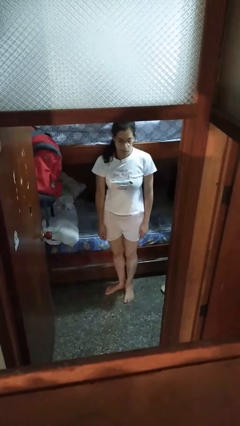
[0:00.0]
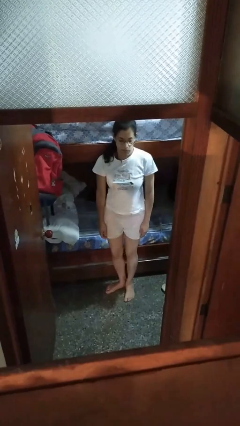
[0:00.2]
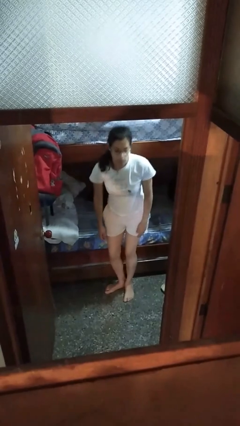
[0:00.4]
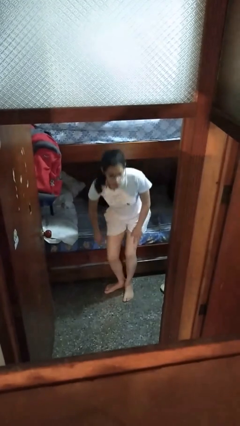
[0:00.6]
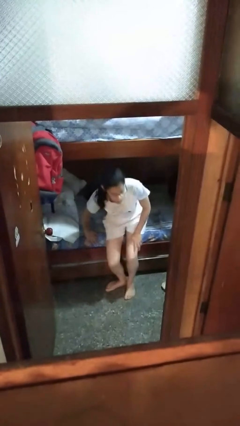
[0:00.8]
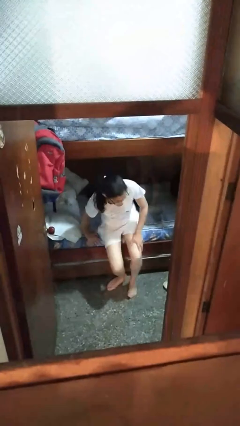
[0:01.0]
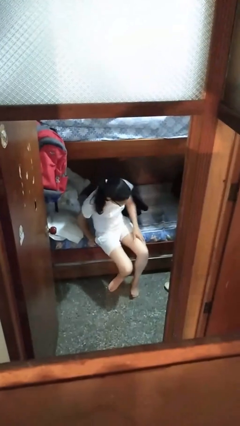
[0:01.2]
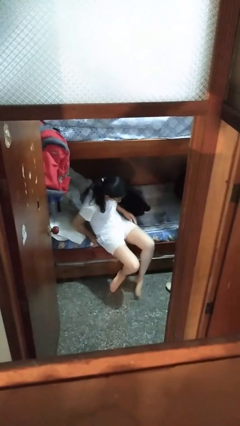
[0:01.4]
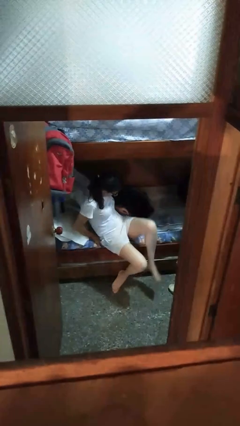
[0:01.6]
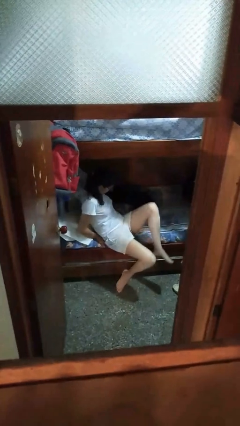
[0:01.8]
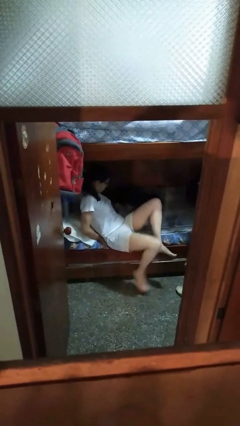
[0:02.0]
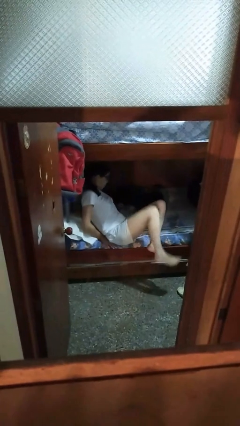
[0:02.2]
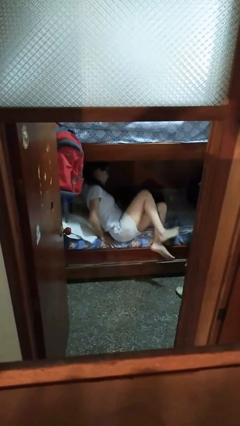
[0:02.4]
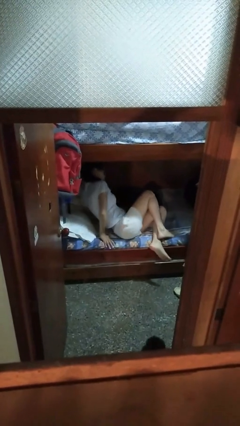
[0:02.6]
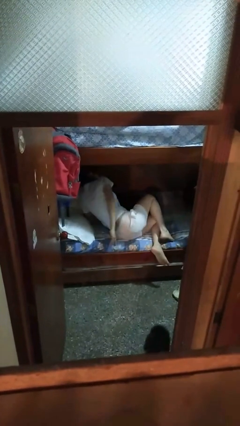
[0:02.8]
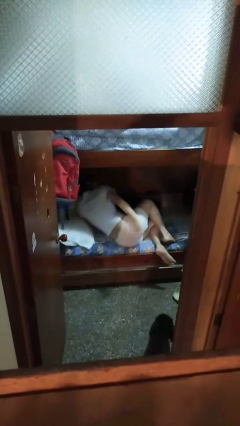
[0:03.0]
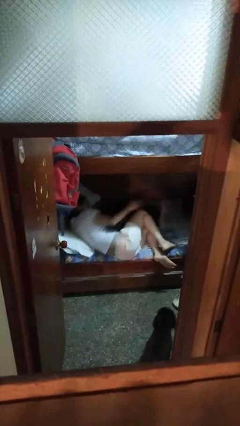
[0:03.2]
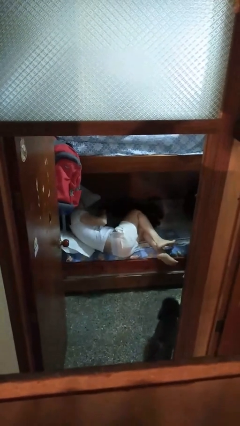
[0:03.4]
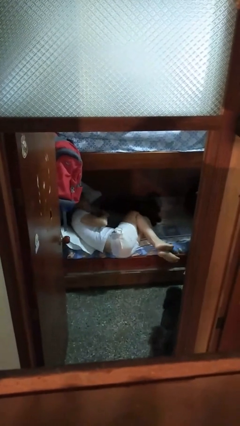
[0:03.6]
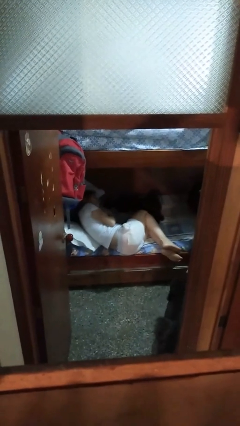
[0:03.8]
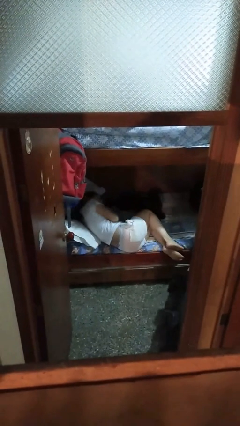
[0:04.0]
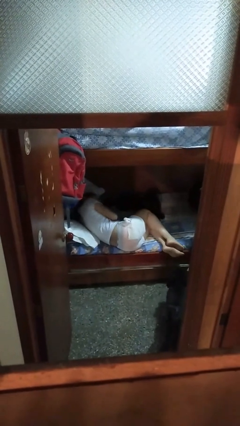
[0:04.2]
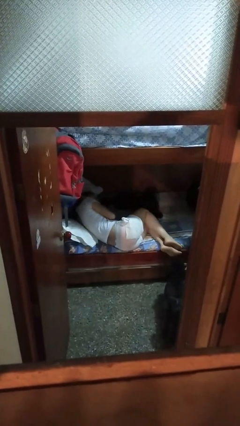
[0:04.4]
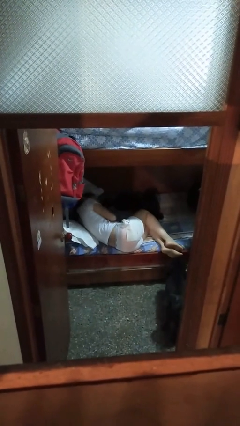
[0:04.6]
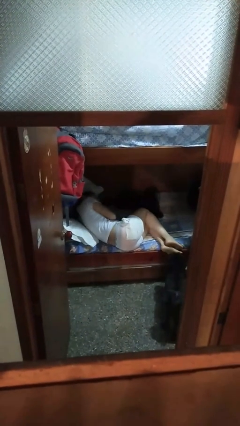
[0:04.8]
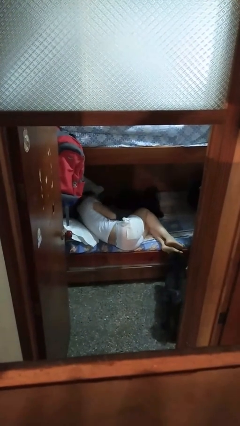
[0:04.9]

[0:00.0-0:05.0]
person lies down on bed

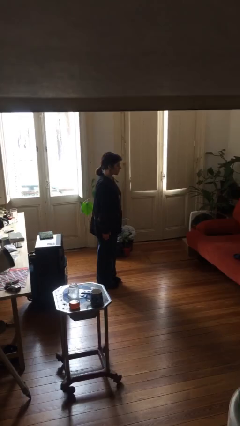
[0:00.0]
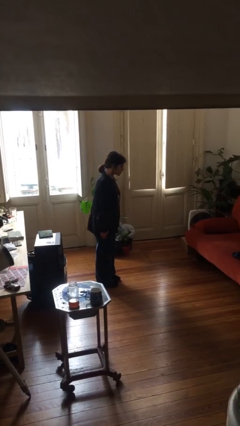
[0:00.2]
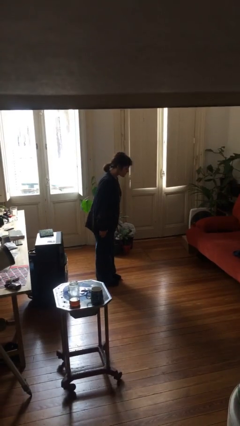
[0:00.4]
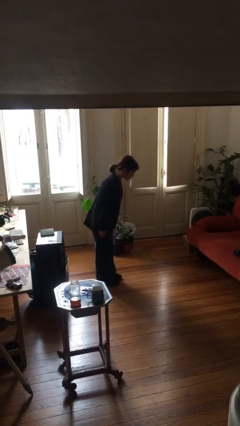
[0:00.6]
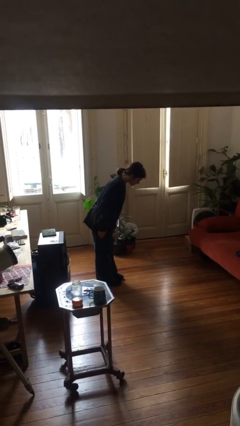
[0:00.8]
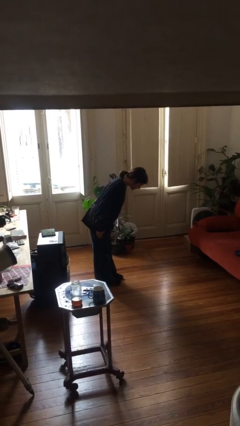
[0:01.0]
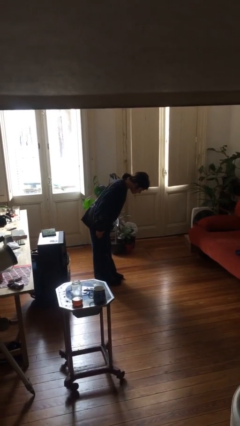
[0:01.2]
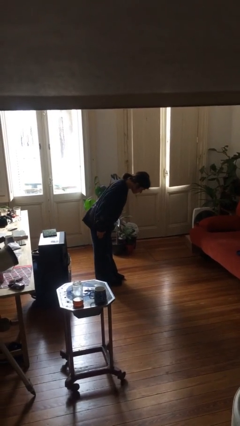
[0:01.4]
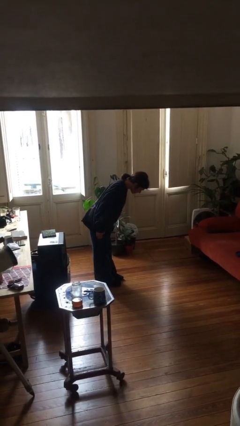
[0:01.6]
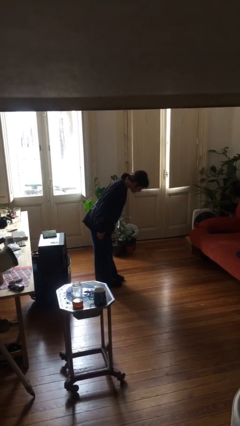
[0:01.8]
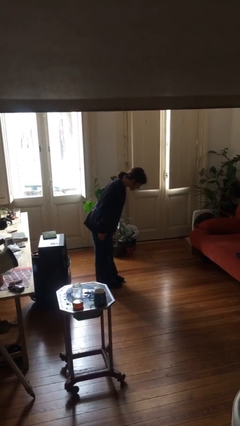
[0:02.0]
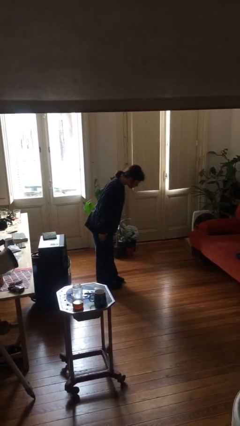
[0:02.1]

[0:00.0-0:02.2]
person bows

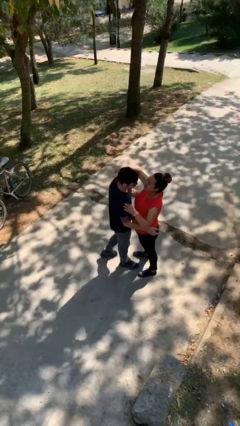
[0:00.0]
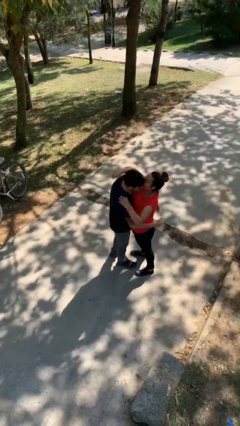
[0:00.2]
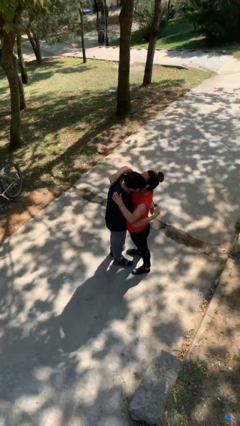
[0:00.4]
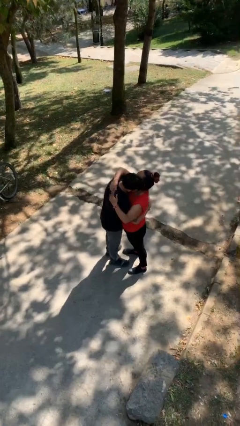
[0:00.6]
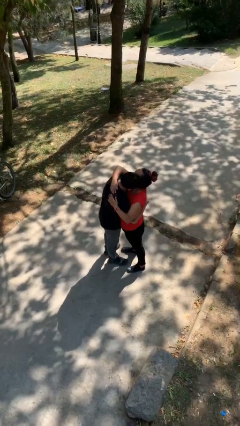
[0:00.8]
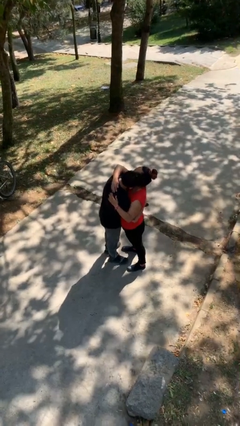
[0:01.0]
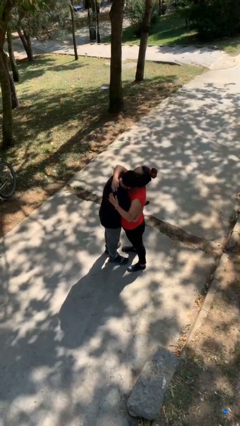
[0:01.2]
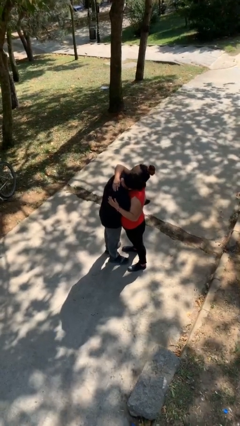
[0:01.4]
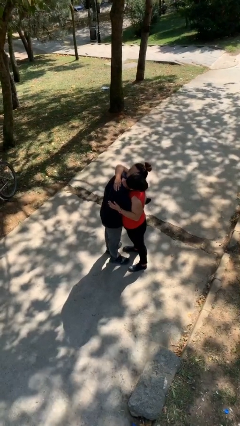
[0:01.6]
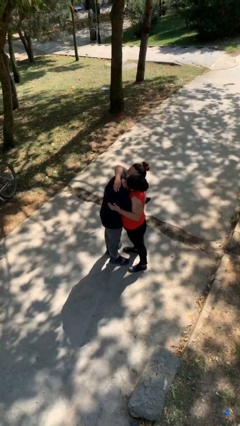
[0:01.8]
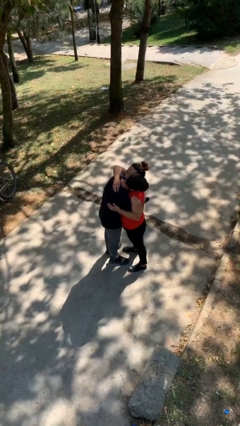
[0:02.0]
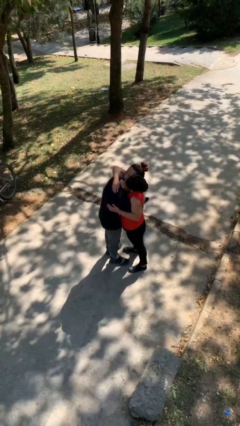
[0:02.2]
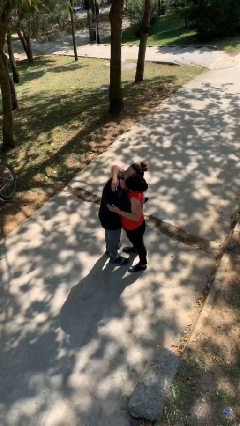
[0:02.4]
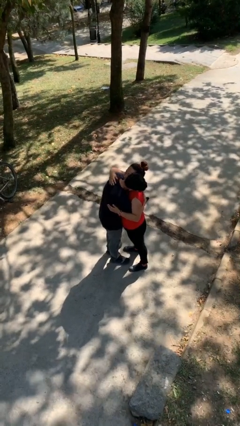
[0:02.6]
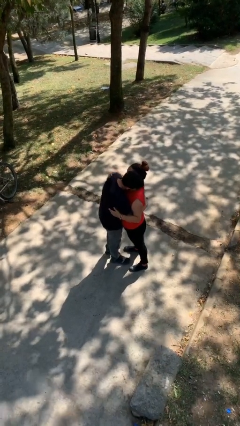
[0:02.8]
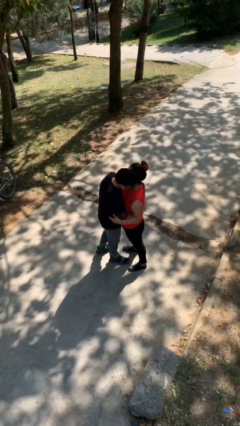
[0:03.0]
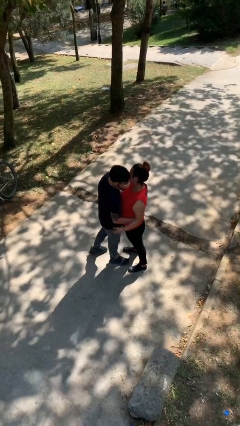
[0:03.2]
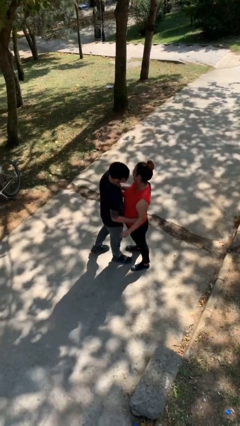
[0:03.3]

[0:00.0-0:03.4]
person embraces person

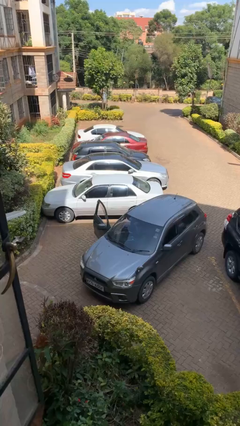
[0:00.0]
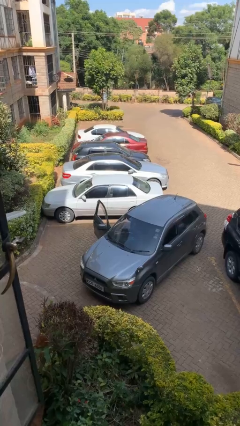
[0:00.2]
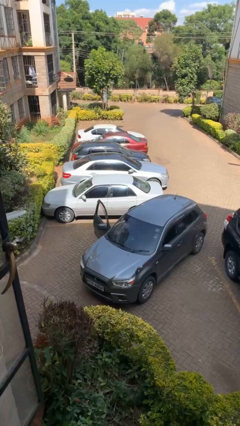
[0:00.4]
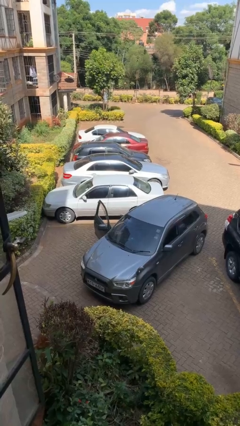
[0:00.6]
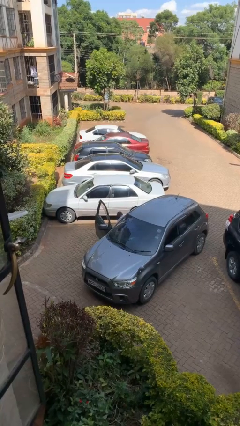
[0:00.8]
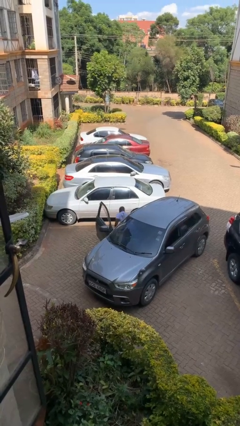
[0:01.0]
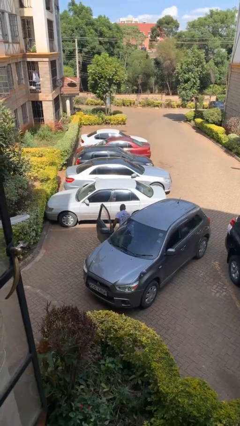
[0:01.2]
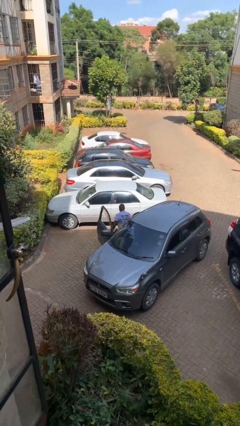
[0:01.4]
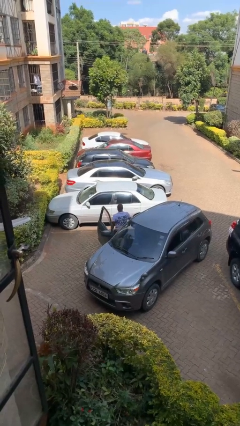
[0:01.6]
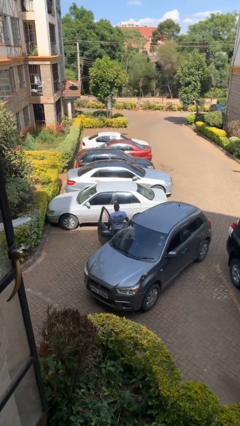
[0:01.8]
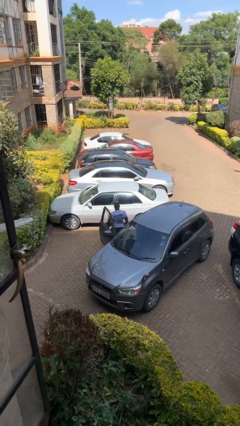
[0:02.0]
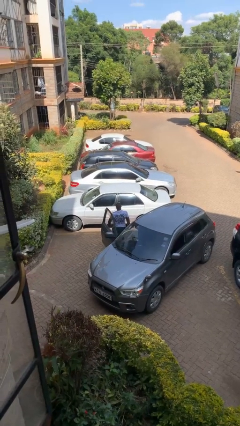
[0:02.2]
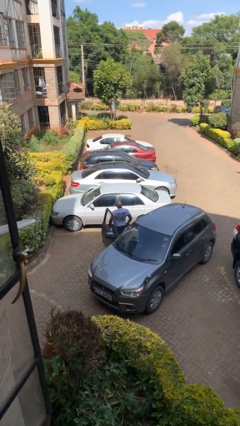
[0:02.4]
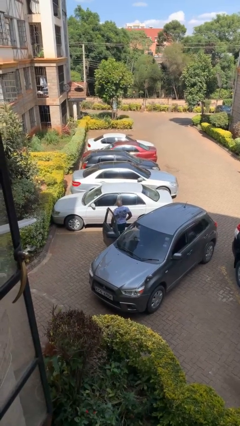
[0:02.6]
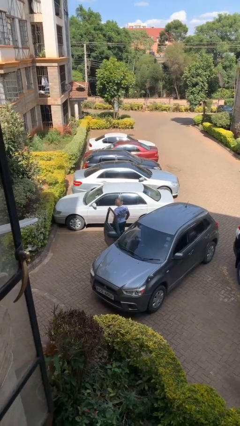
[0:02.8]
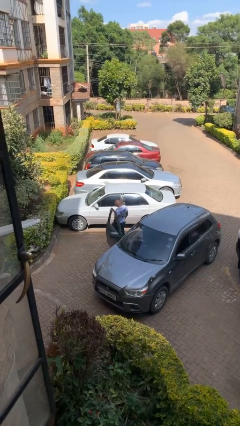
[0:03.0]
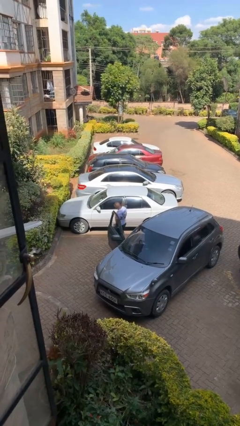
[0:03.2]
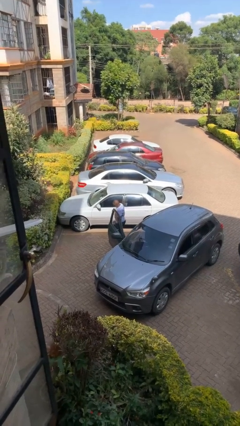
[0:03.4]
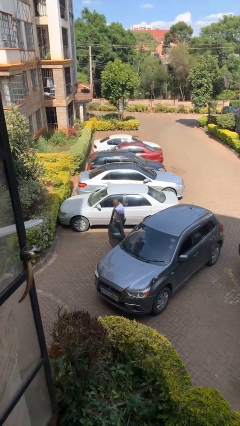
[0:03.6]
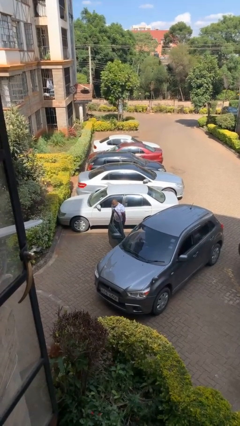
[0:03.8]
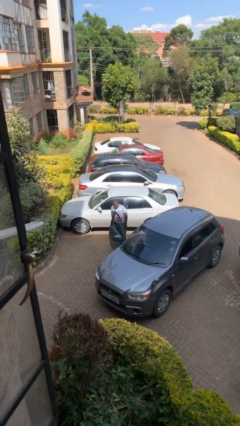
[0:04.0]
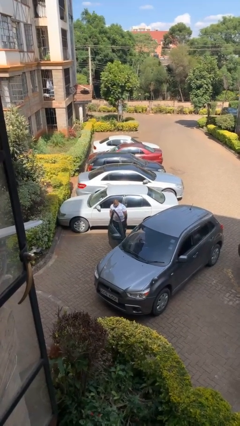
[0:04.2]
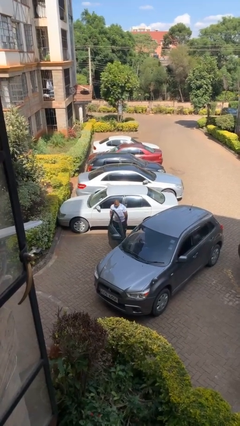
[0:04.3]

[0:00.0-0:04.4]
person exits car

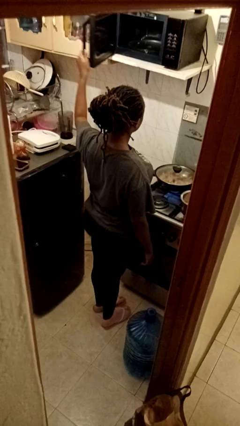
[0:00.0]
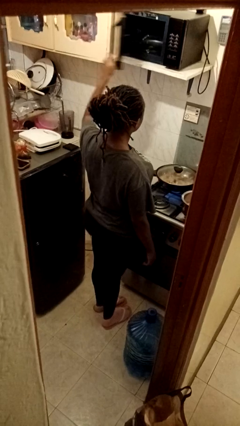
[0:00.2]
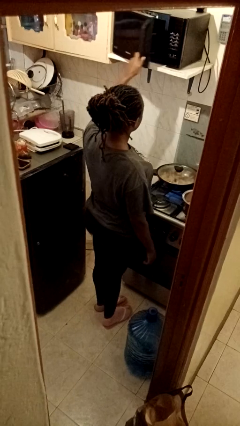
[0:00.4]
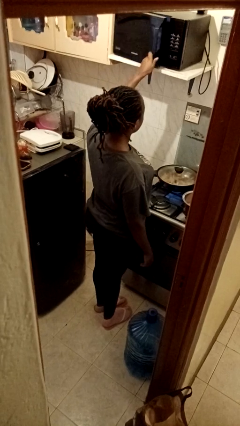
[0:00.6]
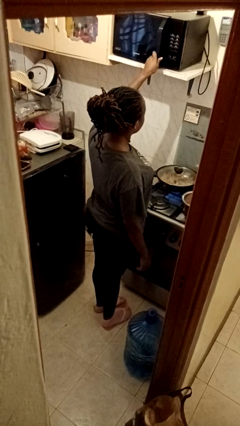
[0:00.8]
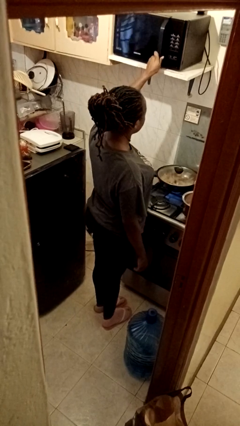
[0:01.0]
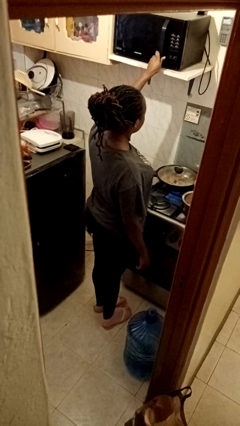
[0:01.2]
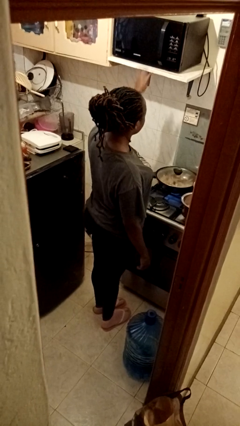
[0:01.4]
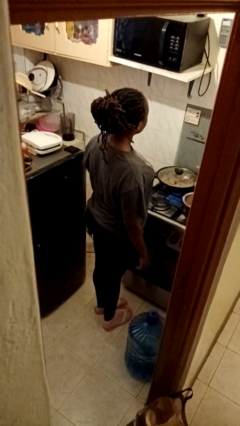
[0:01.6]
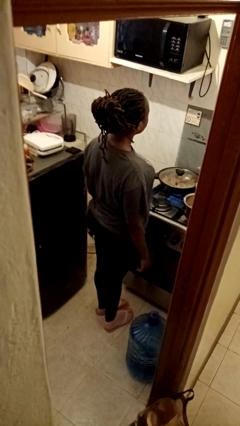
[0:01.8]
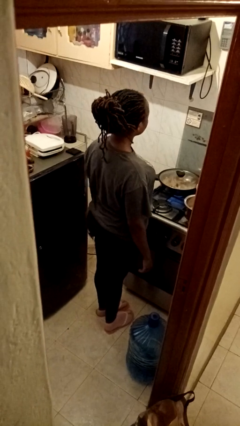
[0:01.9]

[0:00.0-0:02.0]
person closes microwave

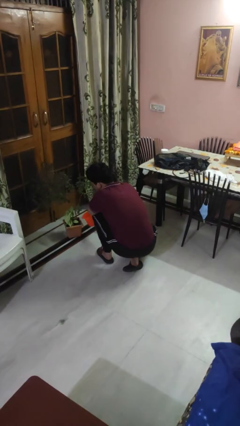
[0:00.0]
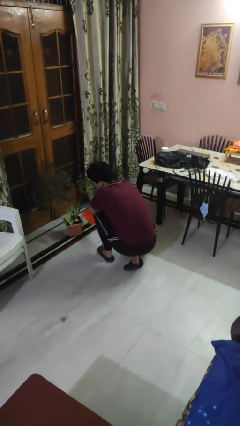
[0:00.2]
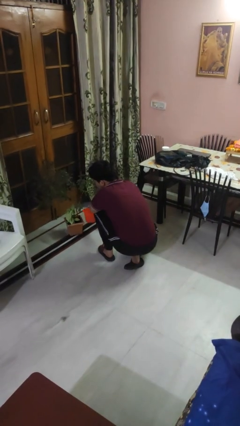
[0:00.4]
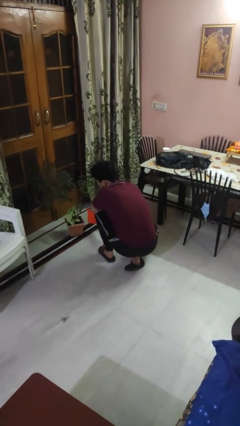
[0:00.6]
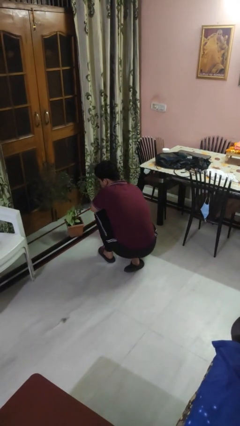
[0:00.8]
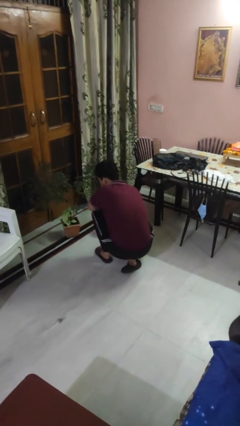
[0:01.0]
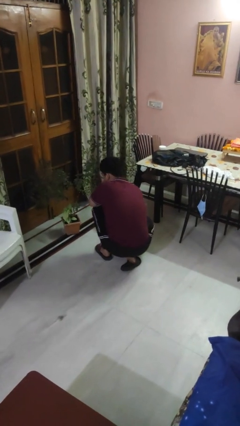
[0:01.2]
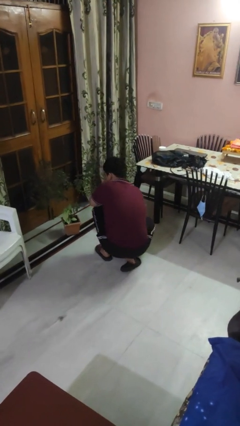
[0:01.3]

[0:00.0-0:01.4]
person waters houseplant
